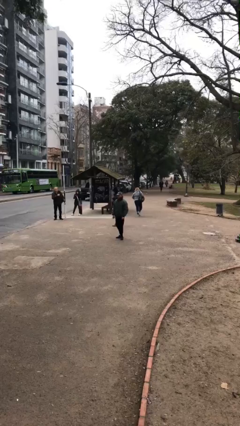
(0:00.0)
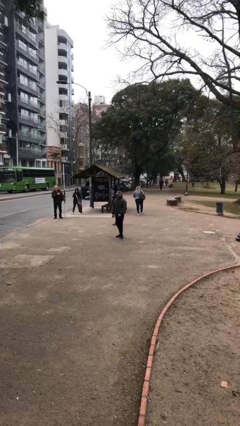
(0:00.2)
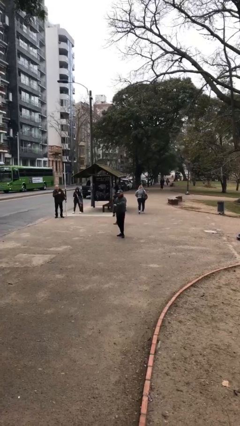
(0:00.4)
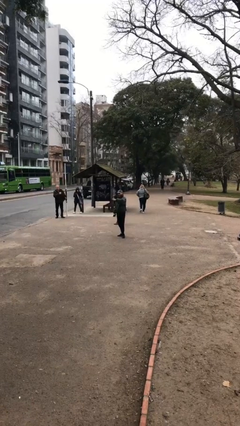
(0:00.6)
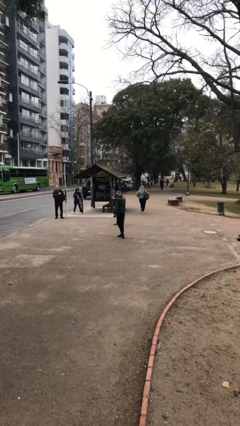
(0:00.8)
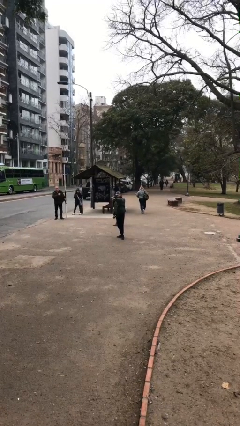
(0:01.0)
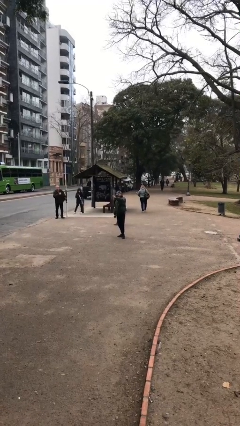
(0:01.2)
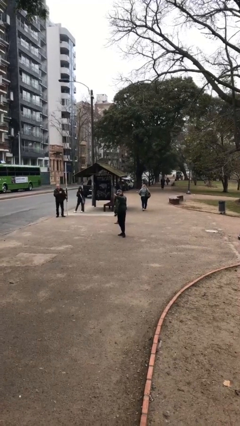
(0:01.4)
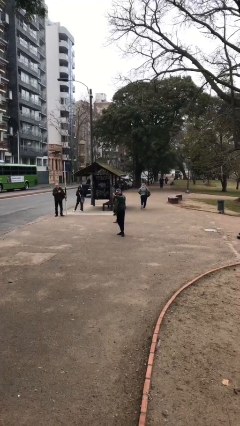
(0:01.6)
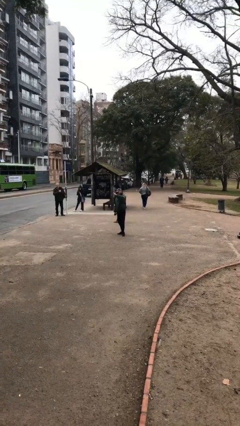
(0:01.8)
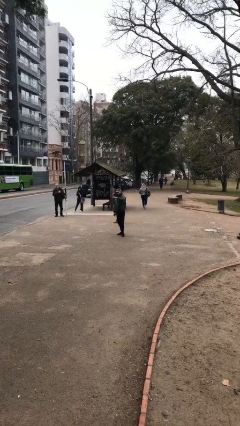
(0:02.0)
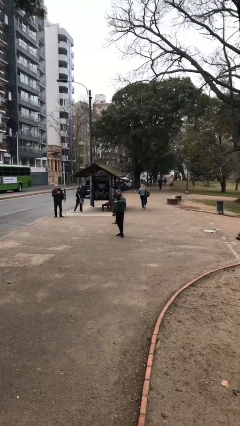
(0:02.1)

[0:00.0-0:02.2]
person points at person

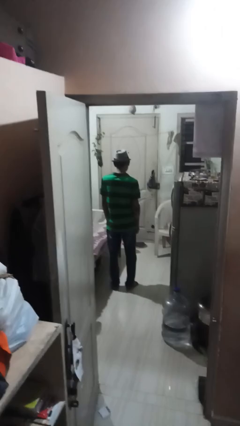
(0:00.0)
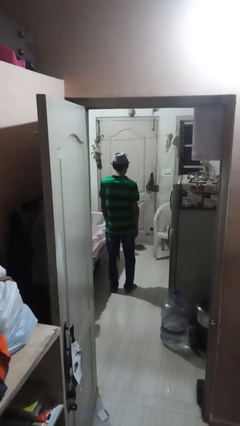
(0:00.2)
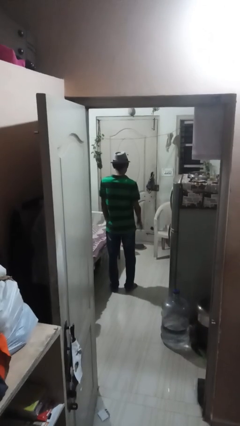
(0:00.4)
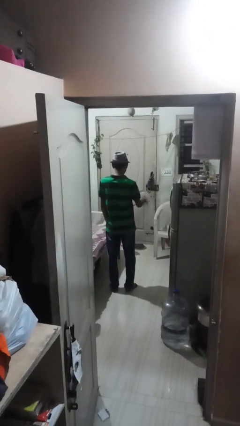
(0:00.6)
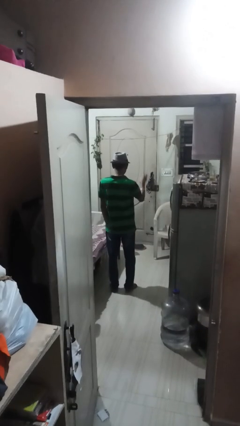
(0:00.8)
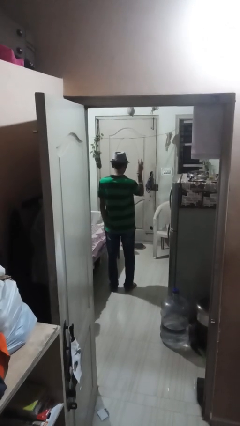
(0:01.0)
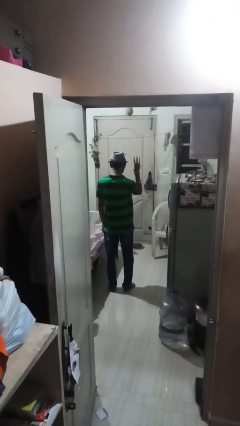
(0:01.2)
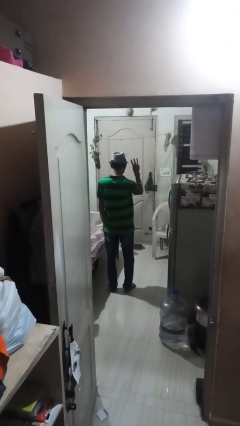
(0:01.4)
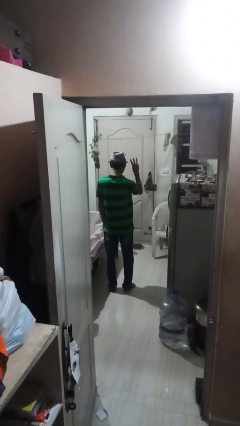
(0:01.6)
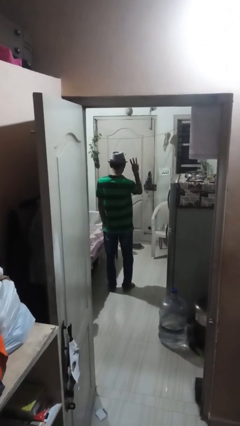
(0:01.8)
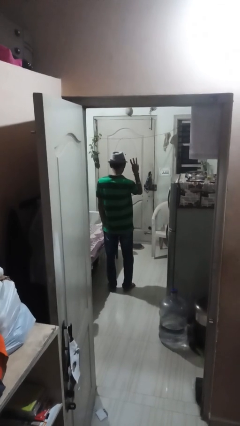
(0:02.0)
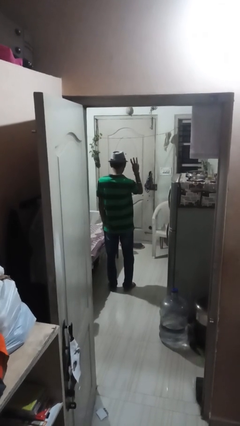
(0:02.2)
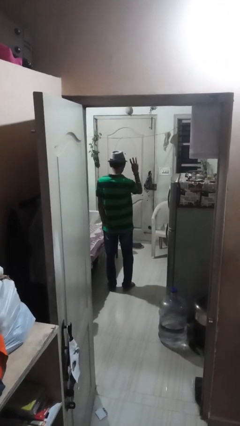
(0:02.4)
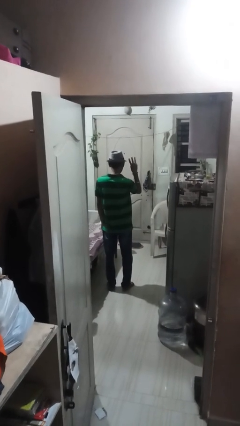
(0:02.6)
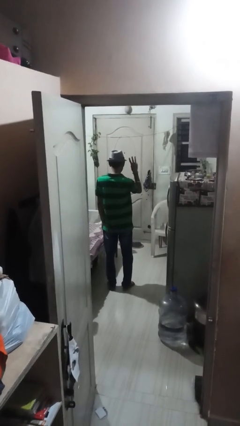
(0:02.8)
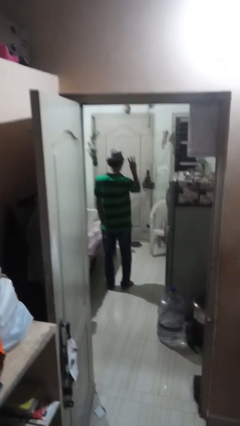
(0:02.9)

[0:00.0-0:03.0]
person gestures number three

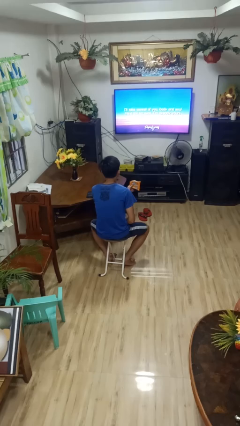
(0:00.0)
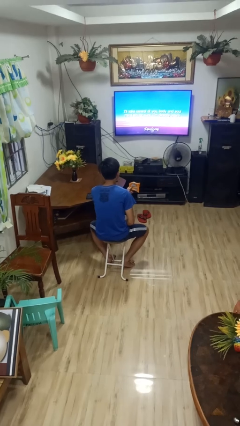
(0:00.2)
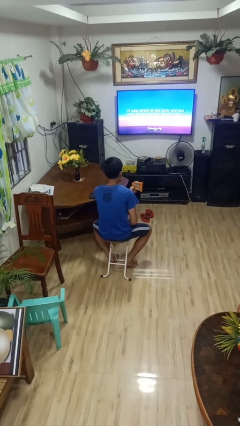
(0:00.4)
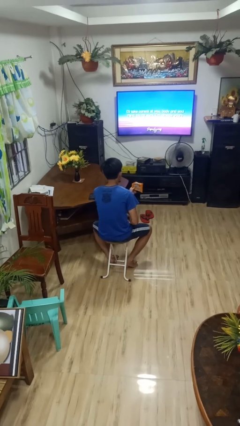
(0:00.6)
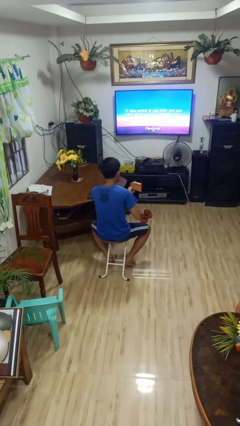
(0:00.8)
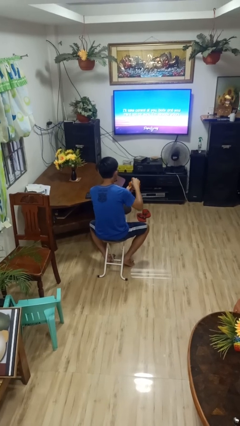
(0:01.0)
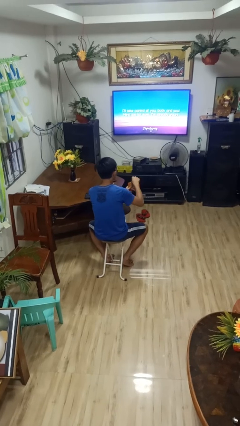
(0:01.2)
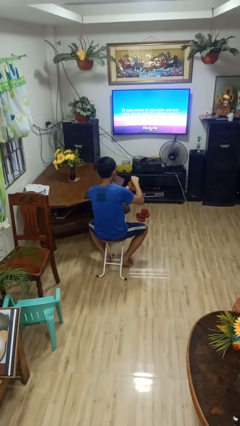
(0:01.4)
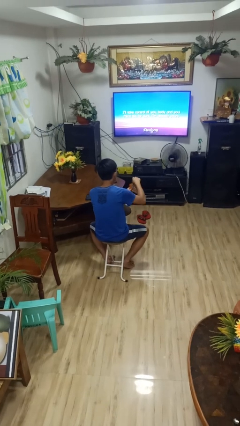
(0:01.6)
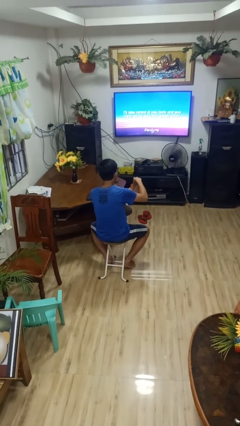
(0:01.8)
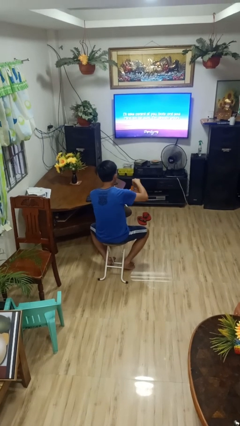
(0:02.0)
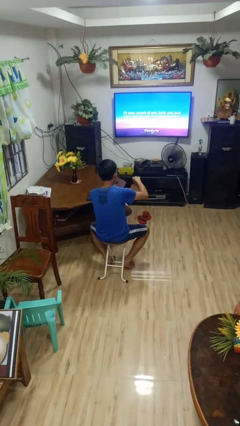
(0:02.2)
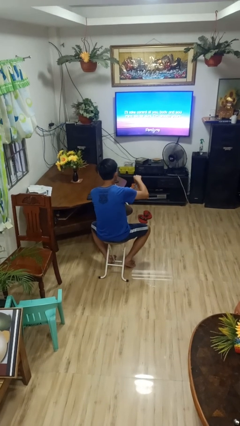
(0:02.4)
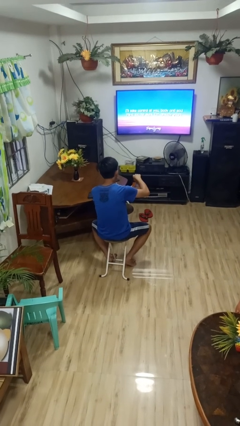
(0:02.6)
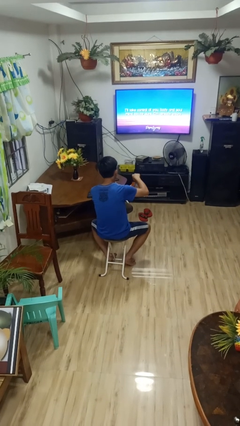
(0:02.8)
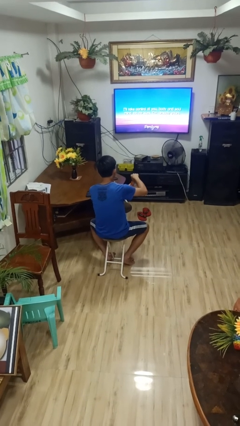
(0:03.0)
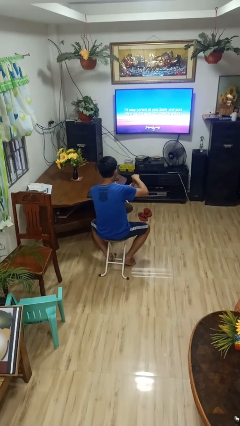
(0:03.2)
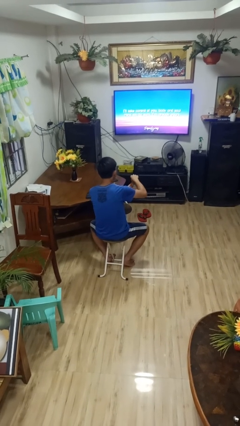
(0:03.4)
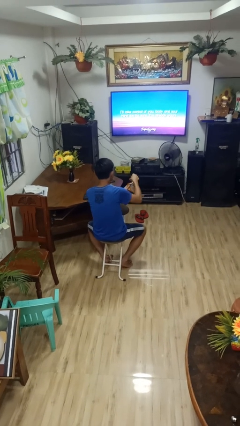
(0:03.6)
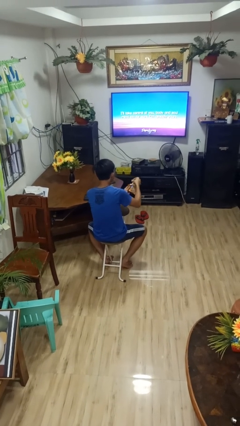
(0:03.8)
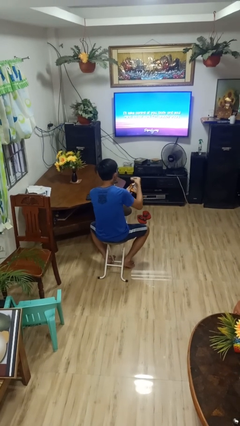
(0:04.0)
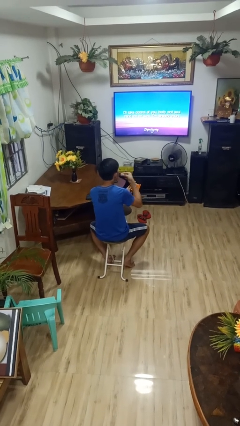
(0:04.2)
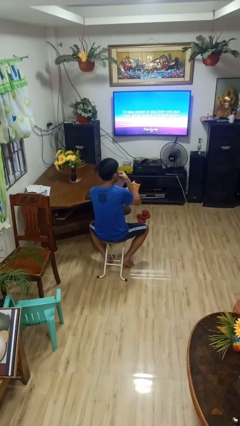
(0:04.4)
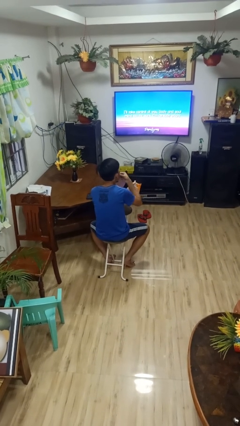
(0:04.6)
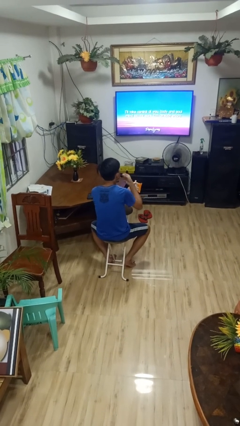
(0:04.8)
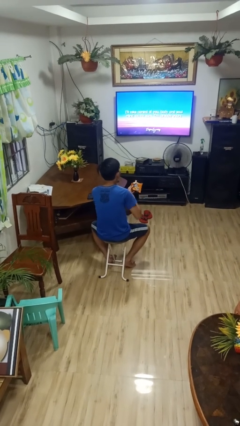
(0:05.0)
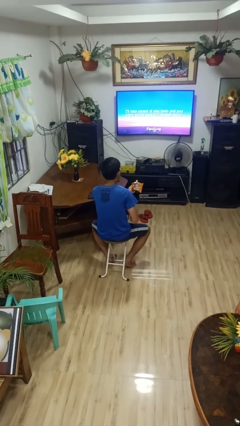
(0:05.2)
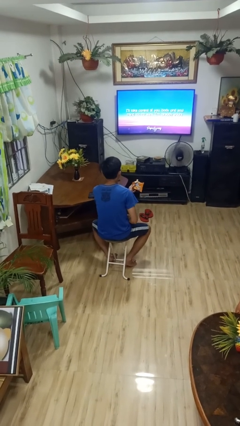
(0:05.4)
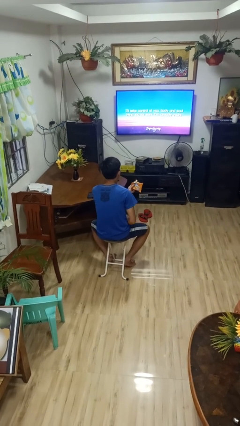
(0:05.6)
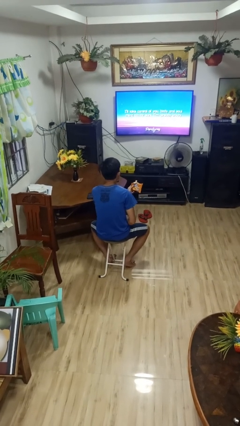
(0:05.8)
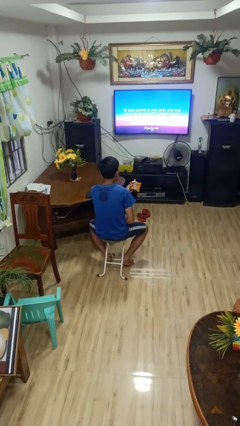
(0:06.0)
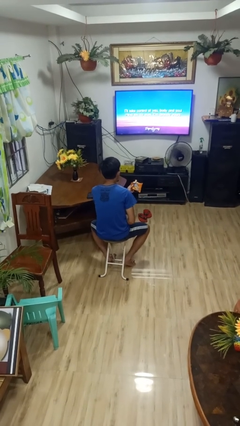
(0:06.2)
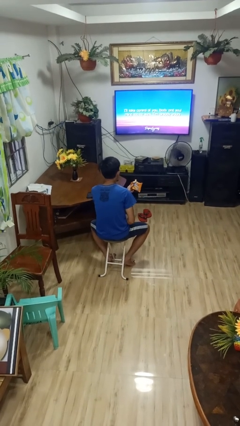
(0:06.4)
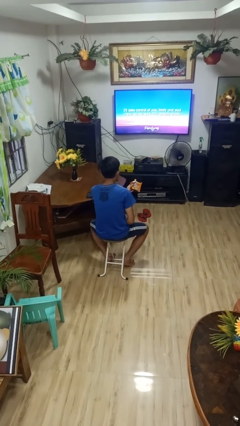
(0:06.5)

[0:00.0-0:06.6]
person eats snack from bag

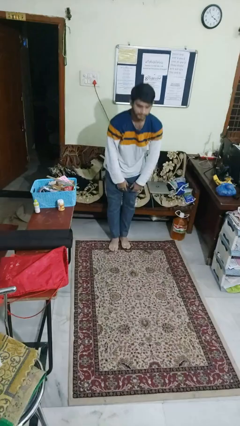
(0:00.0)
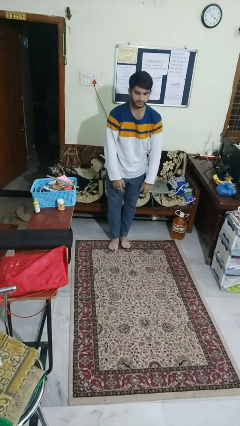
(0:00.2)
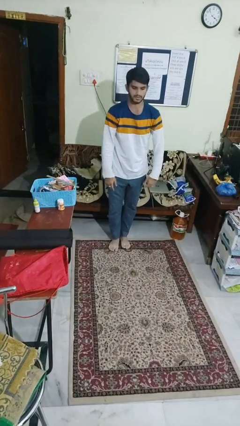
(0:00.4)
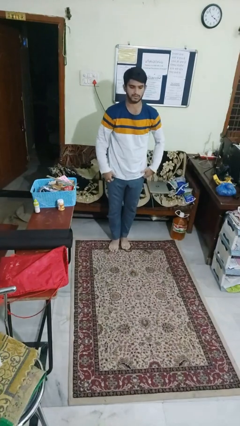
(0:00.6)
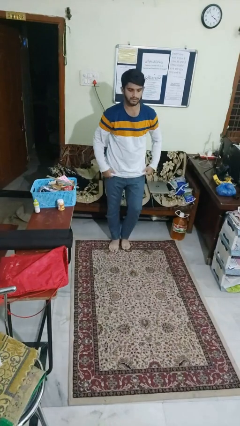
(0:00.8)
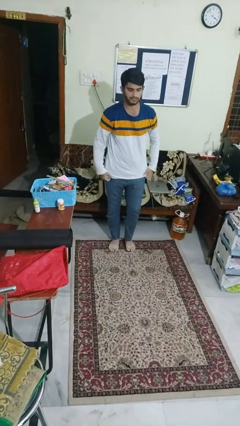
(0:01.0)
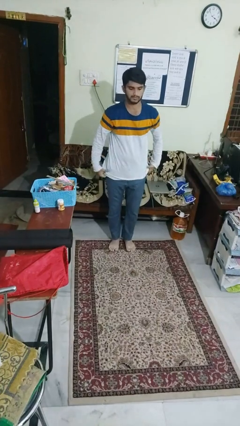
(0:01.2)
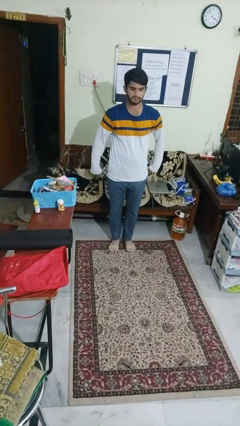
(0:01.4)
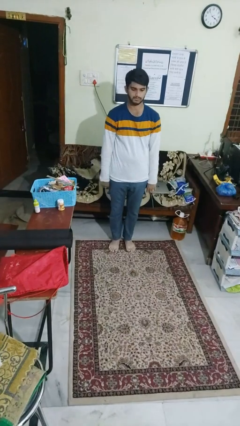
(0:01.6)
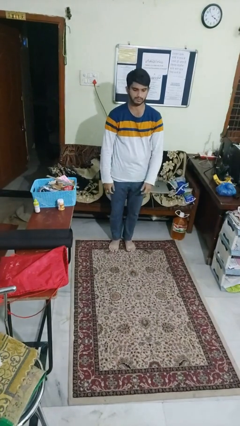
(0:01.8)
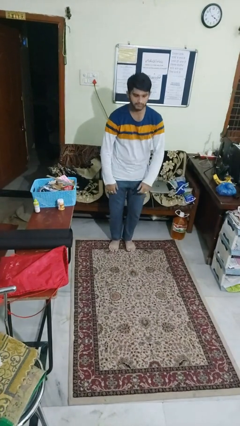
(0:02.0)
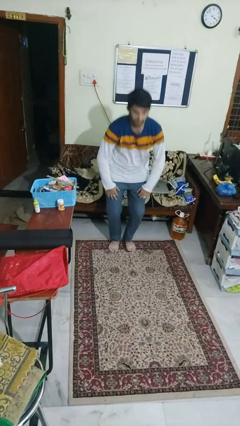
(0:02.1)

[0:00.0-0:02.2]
person stands up from floor

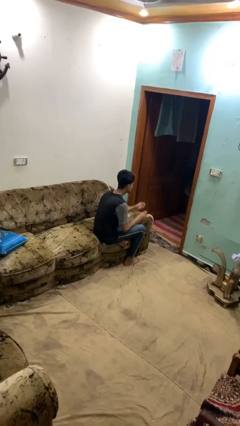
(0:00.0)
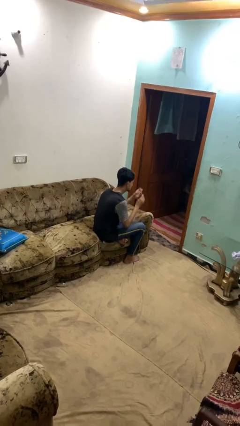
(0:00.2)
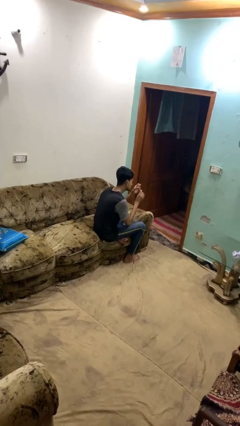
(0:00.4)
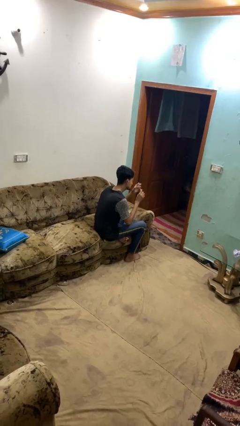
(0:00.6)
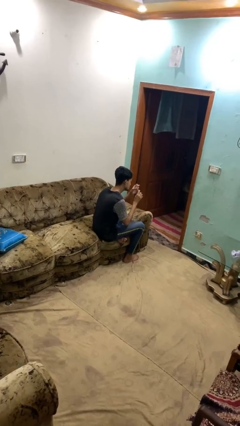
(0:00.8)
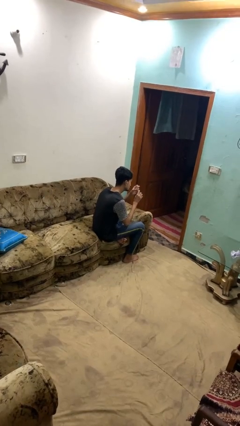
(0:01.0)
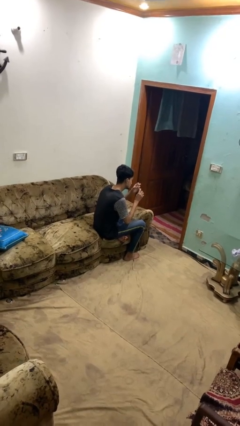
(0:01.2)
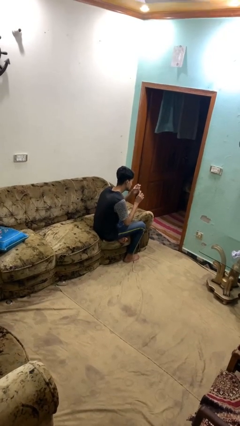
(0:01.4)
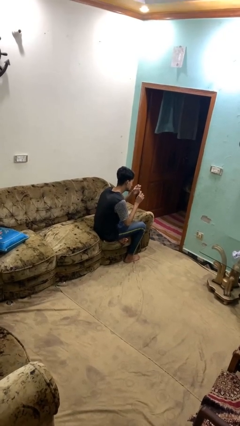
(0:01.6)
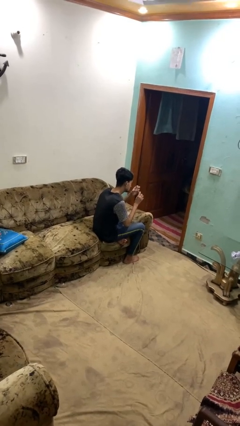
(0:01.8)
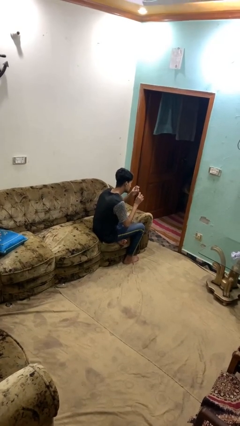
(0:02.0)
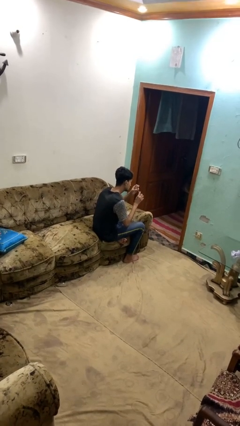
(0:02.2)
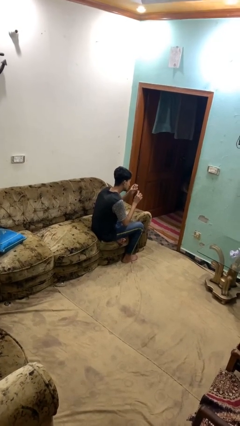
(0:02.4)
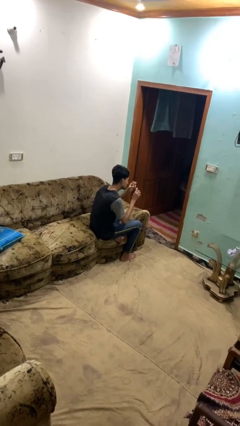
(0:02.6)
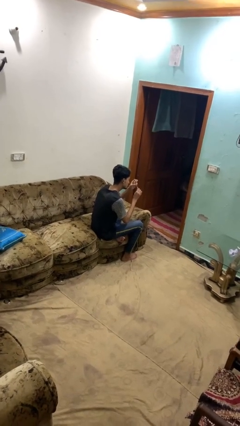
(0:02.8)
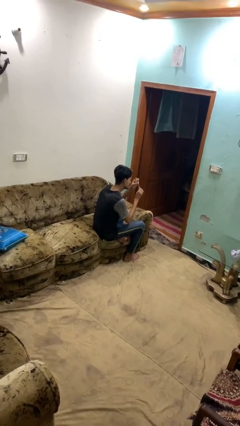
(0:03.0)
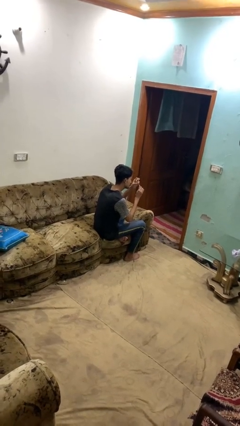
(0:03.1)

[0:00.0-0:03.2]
person files fingernails

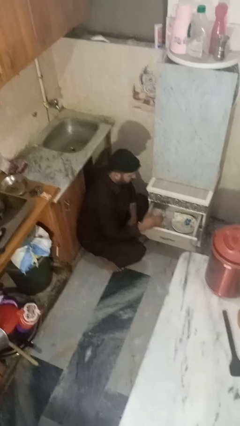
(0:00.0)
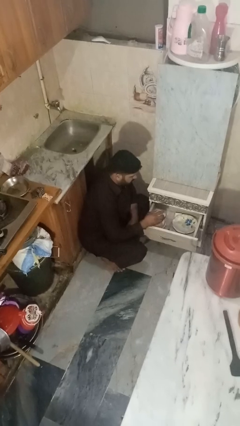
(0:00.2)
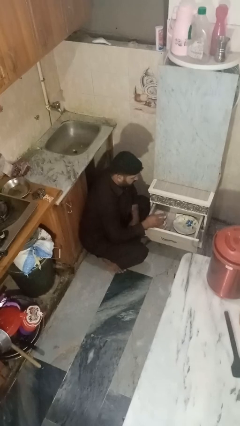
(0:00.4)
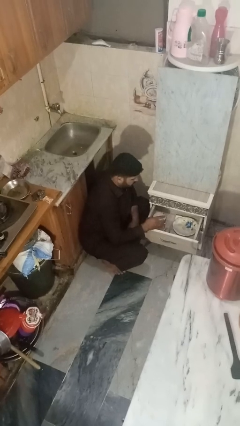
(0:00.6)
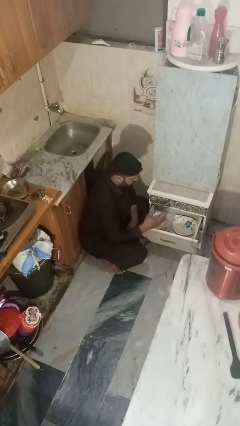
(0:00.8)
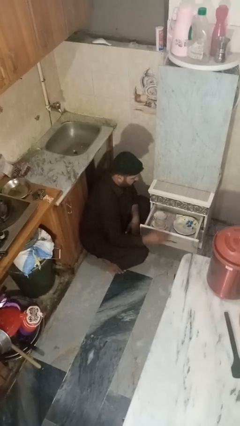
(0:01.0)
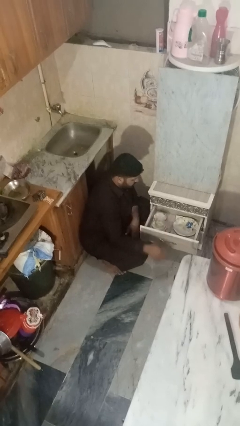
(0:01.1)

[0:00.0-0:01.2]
person puts object into kitchen drawer
